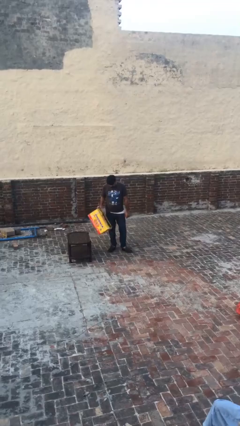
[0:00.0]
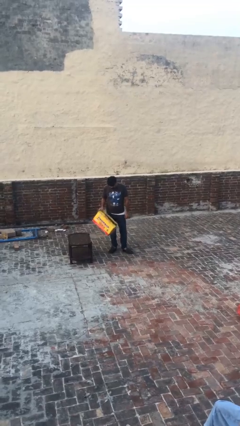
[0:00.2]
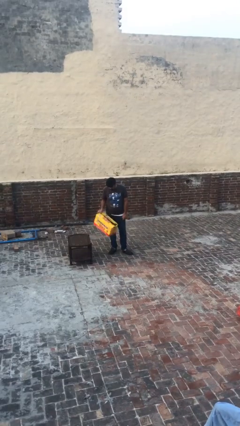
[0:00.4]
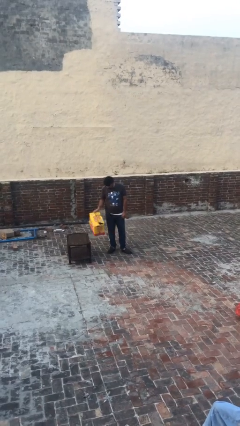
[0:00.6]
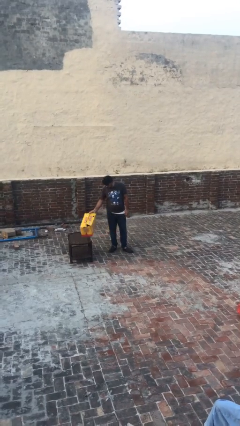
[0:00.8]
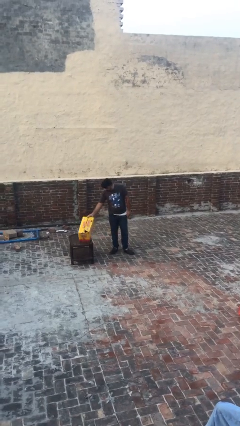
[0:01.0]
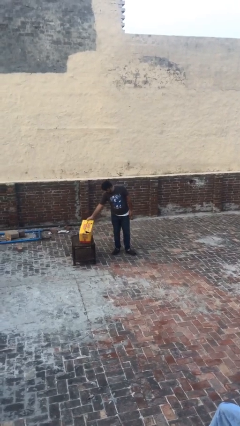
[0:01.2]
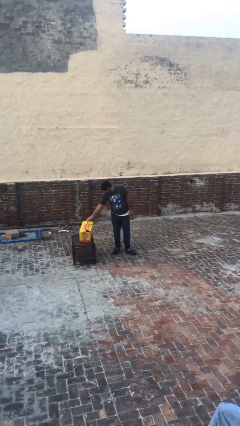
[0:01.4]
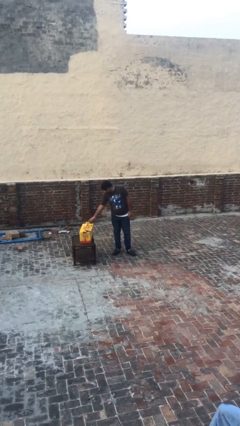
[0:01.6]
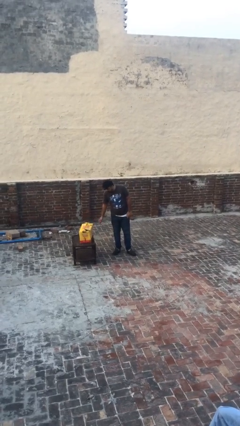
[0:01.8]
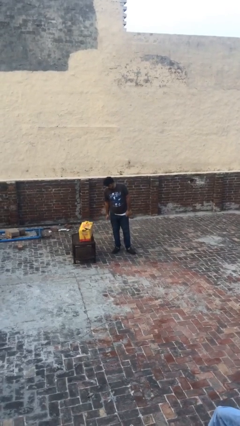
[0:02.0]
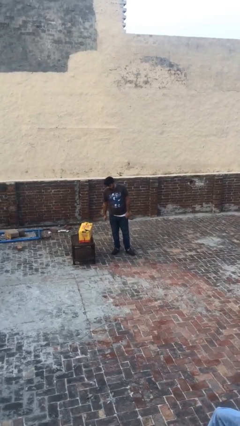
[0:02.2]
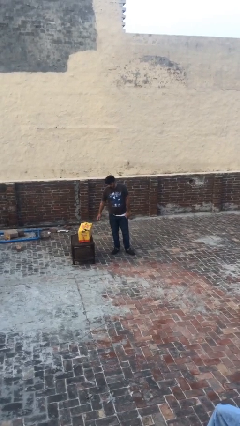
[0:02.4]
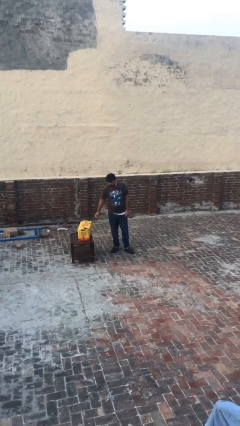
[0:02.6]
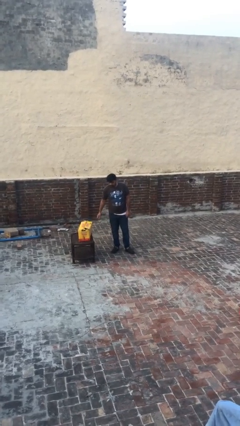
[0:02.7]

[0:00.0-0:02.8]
person puts down object on table

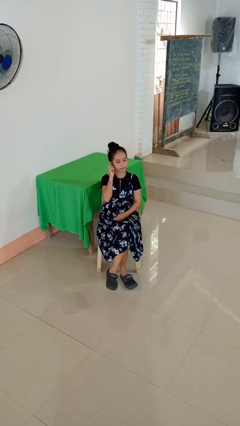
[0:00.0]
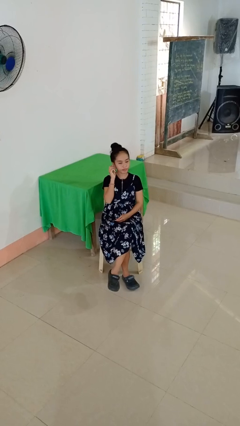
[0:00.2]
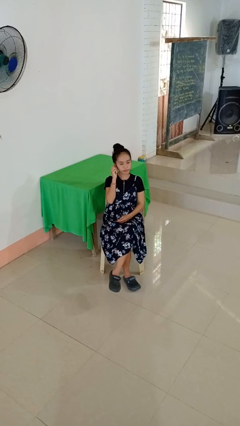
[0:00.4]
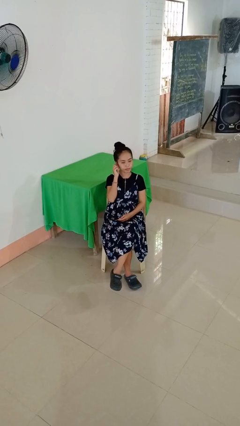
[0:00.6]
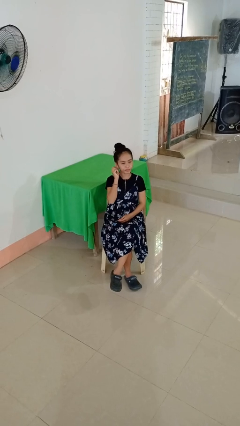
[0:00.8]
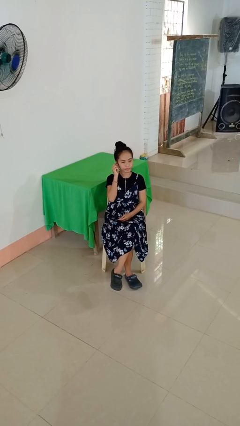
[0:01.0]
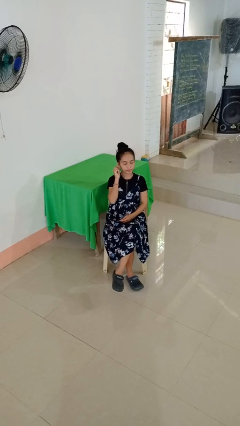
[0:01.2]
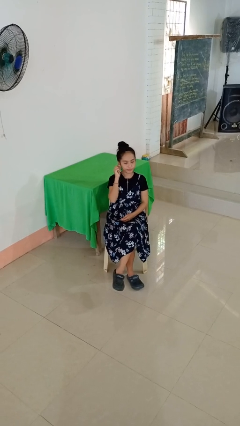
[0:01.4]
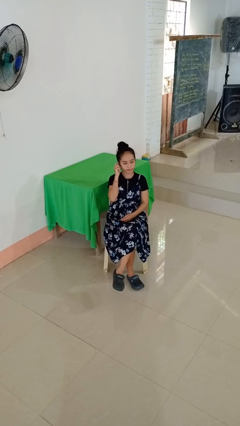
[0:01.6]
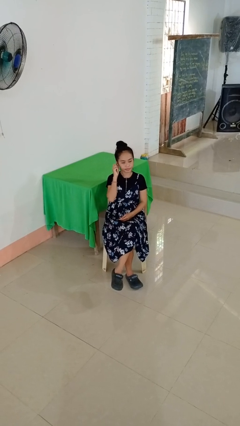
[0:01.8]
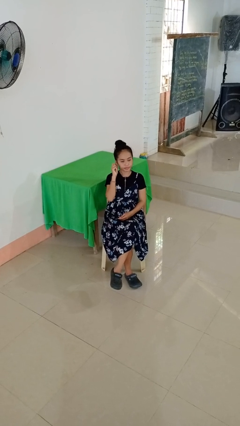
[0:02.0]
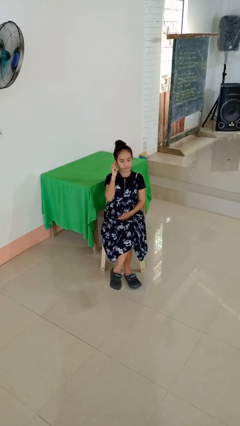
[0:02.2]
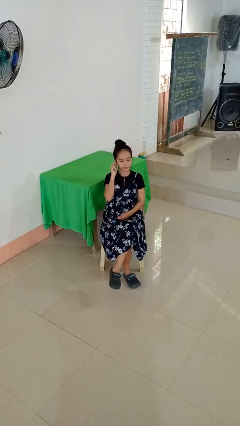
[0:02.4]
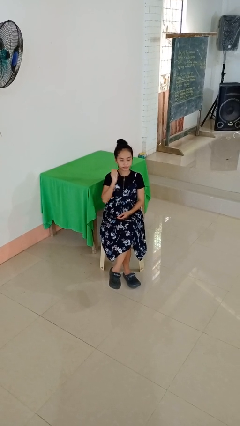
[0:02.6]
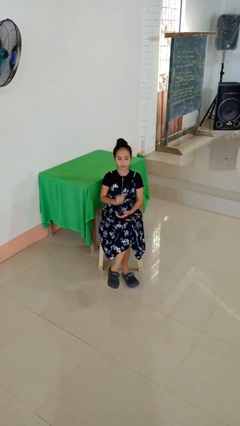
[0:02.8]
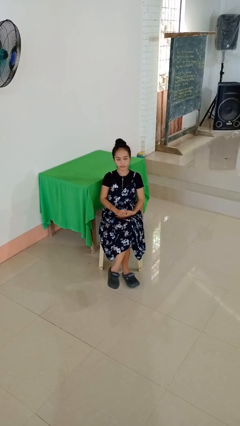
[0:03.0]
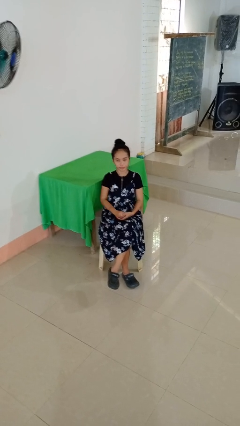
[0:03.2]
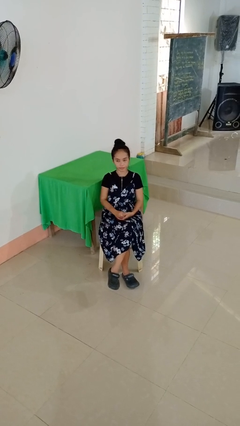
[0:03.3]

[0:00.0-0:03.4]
person touches earlobe

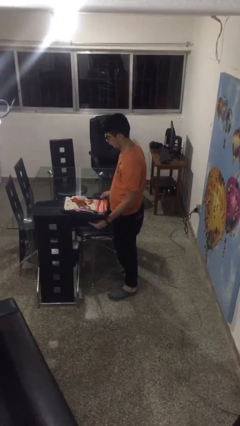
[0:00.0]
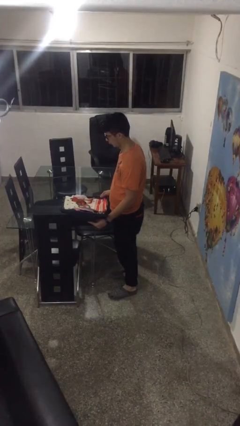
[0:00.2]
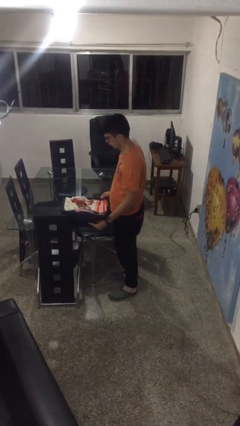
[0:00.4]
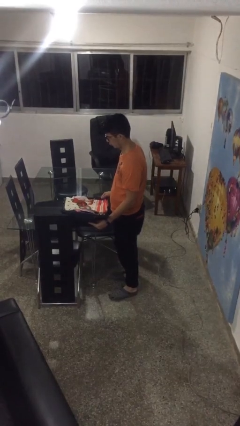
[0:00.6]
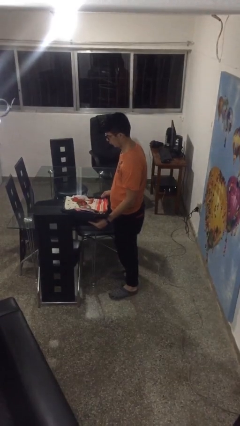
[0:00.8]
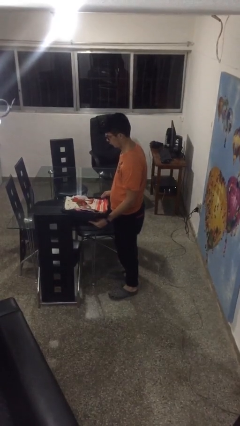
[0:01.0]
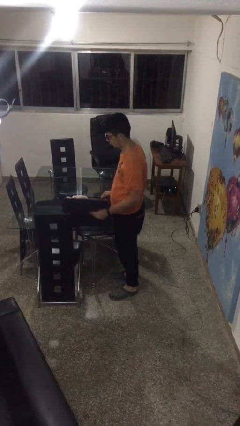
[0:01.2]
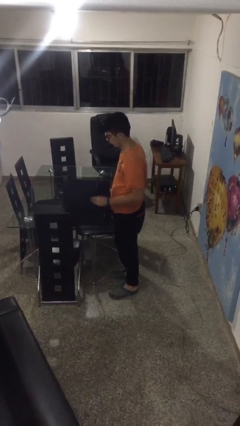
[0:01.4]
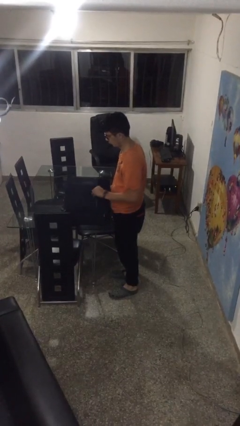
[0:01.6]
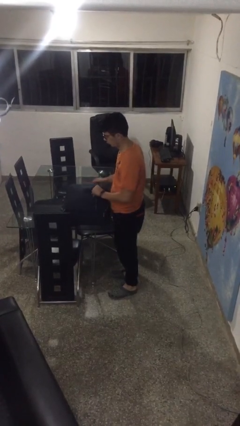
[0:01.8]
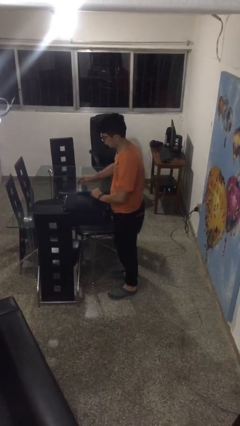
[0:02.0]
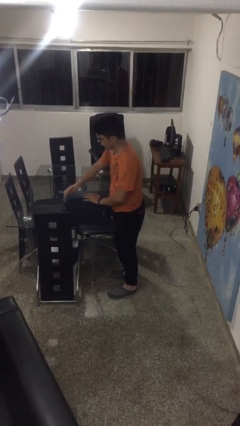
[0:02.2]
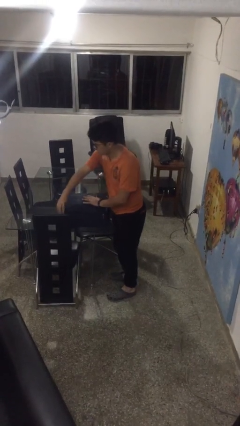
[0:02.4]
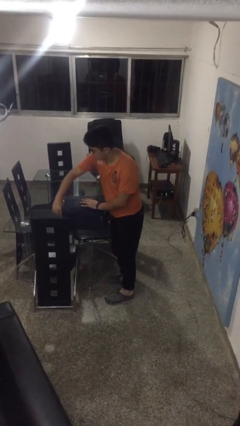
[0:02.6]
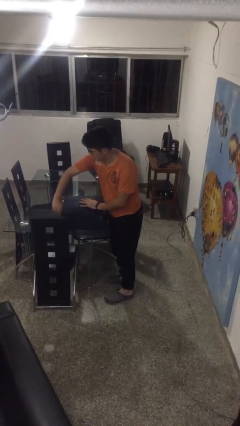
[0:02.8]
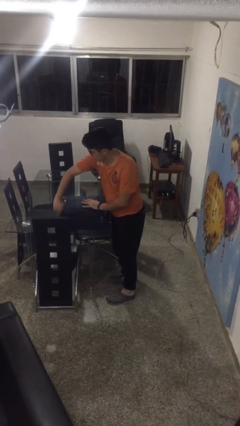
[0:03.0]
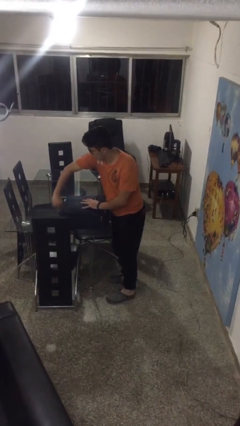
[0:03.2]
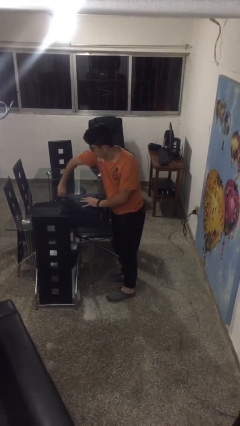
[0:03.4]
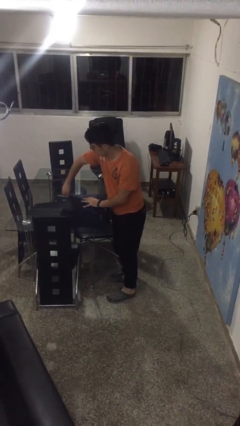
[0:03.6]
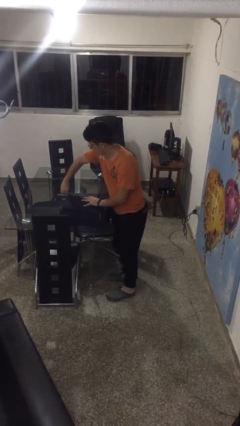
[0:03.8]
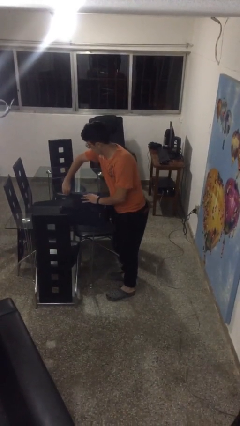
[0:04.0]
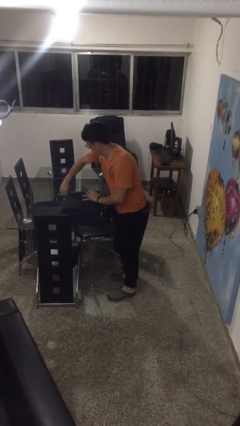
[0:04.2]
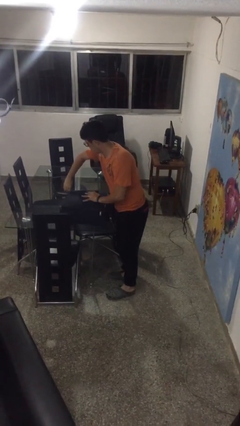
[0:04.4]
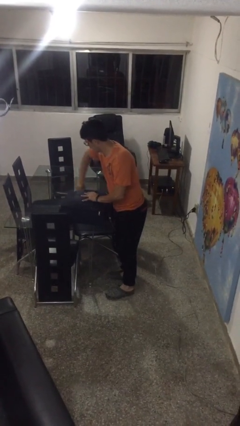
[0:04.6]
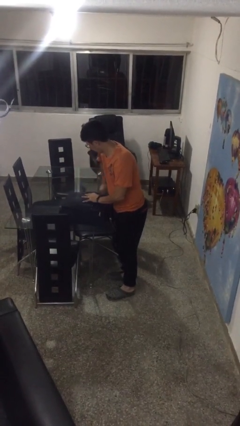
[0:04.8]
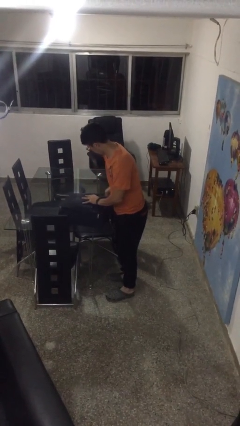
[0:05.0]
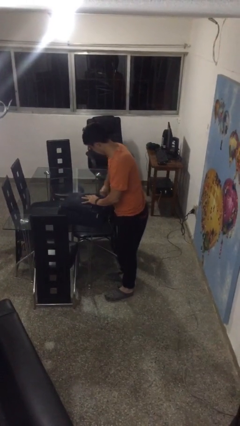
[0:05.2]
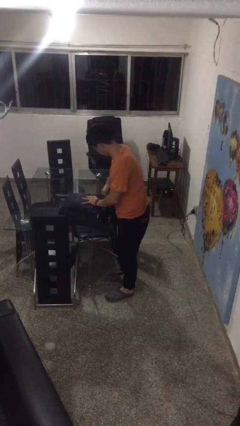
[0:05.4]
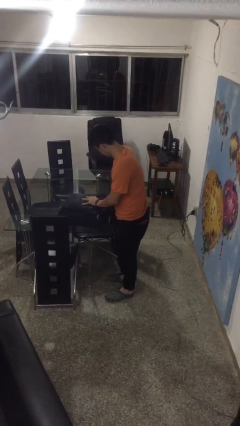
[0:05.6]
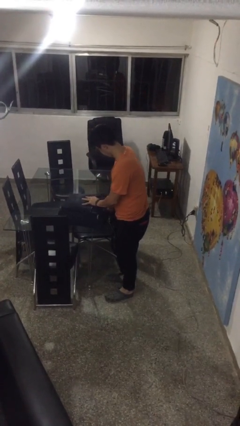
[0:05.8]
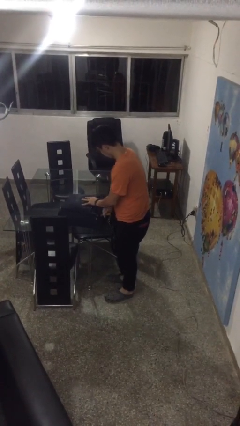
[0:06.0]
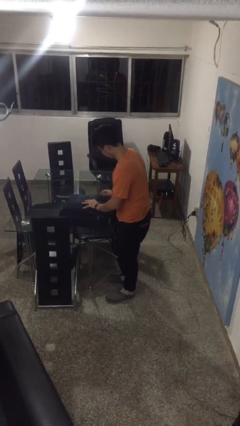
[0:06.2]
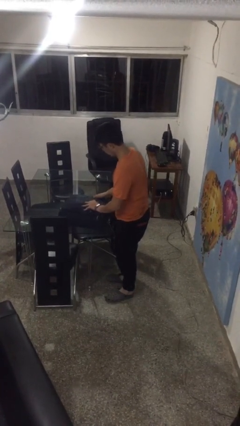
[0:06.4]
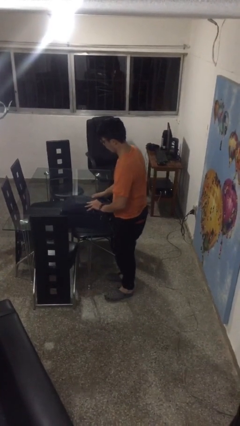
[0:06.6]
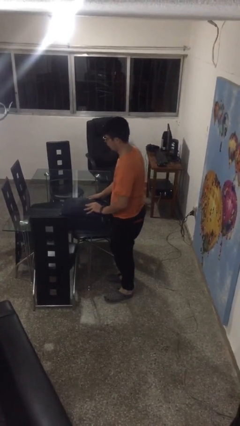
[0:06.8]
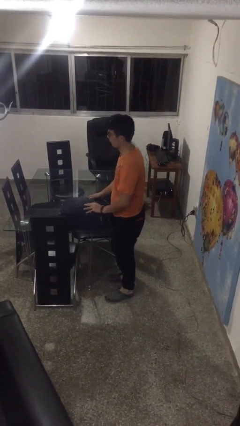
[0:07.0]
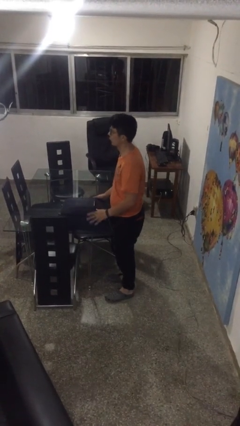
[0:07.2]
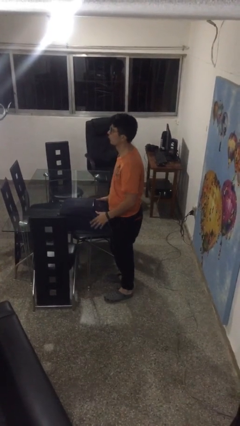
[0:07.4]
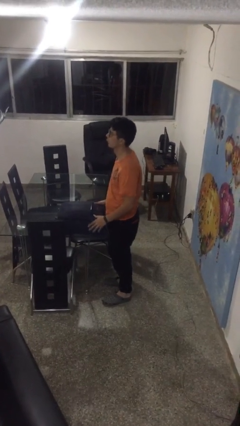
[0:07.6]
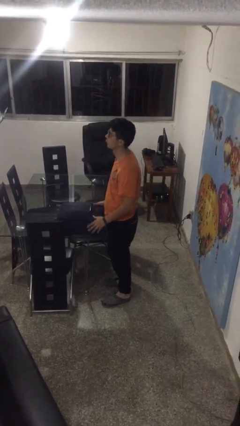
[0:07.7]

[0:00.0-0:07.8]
person closes suitcase

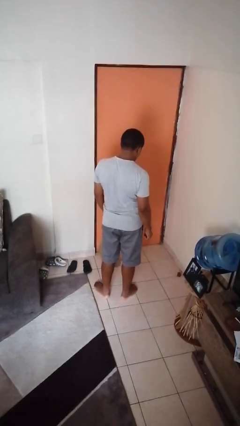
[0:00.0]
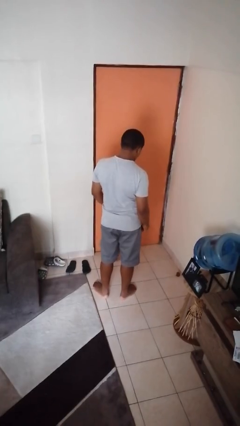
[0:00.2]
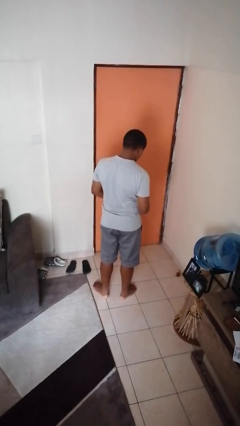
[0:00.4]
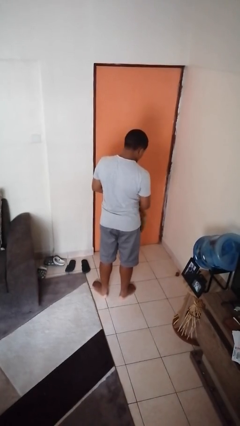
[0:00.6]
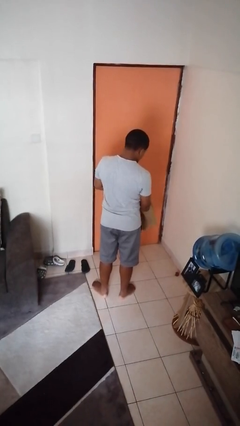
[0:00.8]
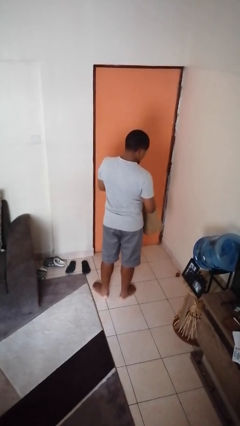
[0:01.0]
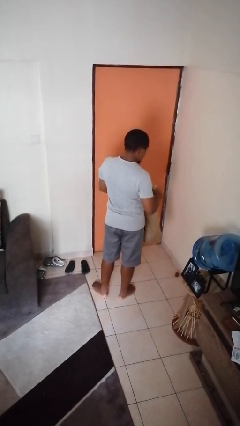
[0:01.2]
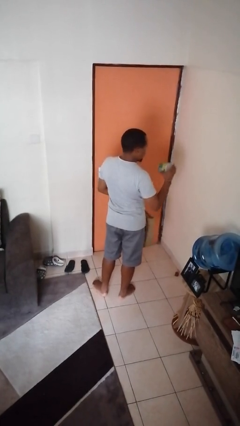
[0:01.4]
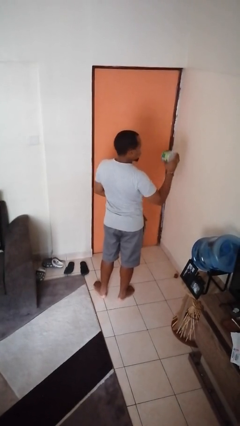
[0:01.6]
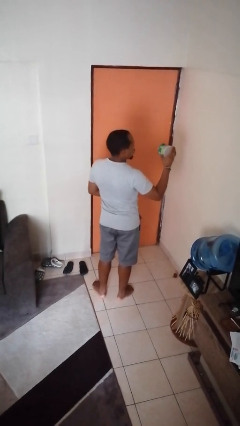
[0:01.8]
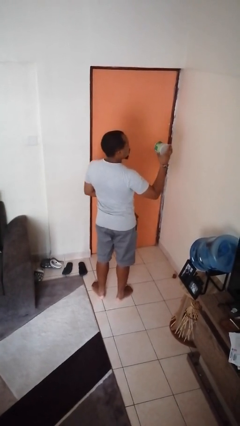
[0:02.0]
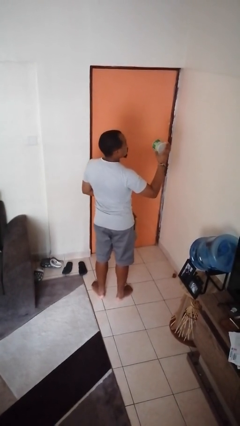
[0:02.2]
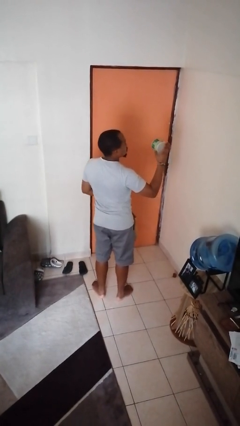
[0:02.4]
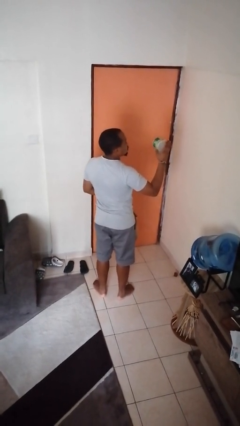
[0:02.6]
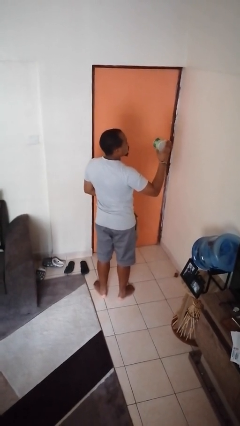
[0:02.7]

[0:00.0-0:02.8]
person takes object from bag

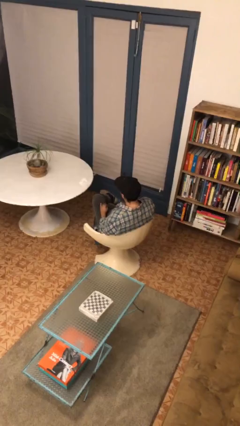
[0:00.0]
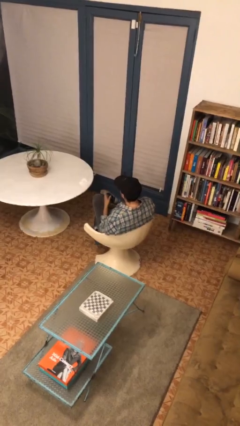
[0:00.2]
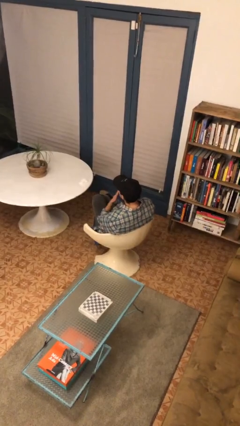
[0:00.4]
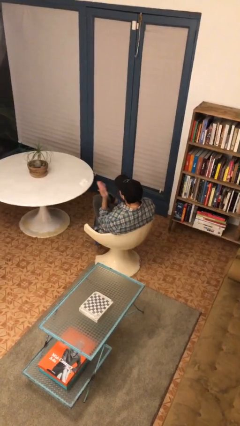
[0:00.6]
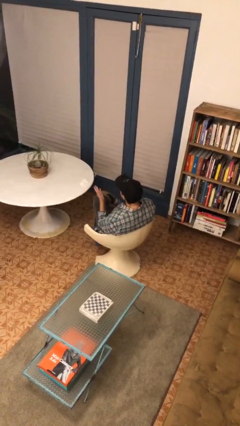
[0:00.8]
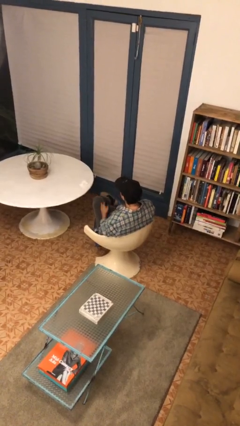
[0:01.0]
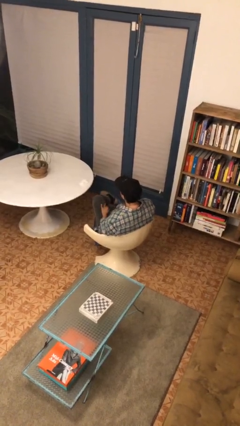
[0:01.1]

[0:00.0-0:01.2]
person gestures blow kiss
